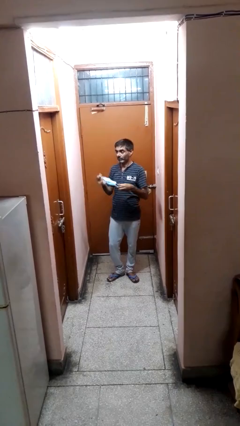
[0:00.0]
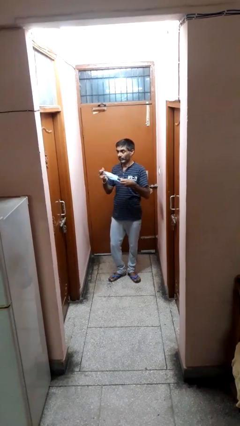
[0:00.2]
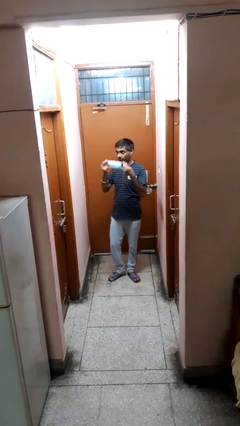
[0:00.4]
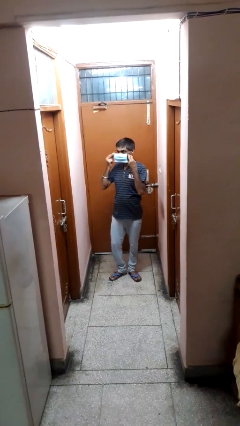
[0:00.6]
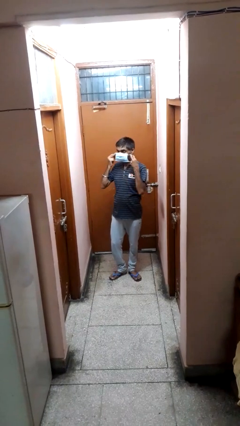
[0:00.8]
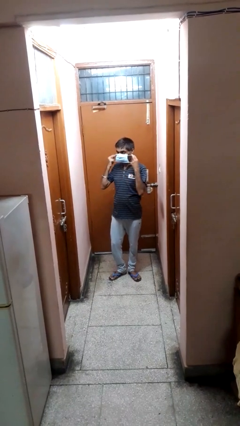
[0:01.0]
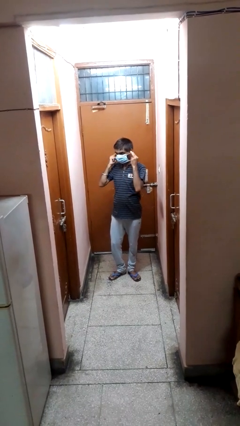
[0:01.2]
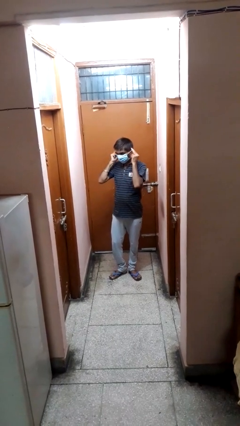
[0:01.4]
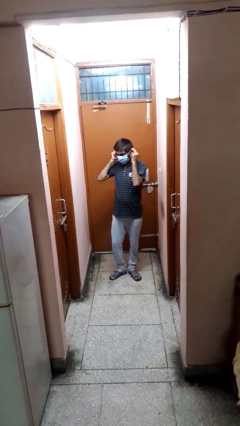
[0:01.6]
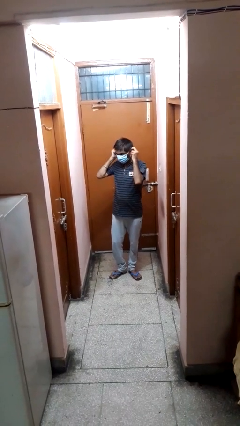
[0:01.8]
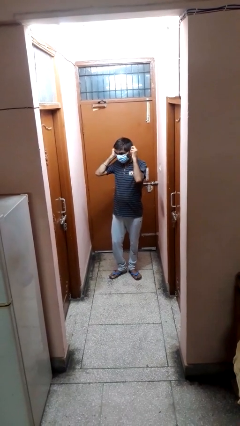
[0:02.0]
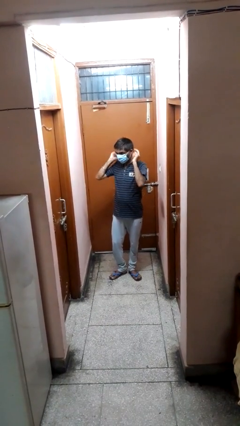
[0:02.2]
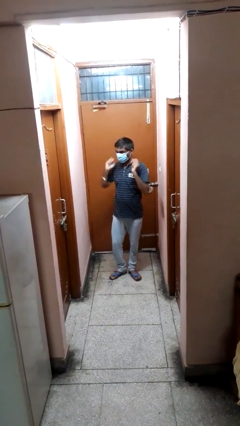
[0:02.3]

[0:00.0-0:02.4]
person puts on facemask

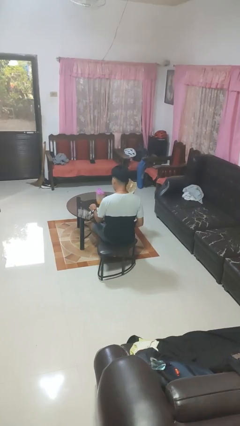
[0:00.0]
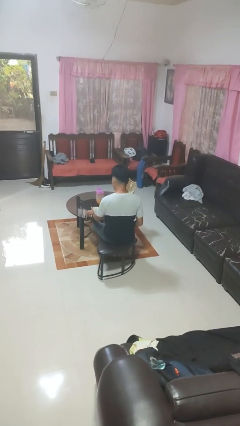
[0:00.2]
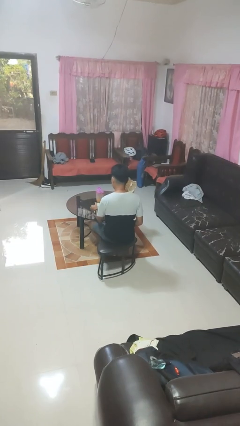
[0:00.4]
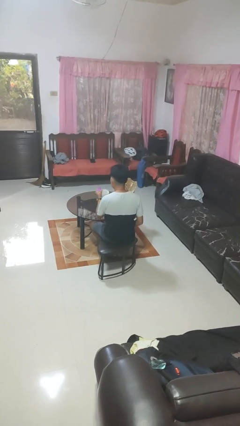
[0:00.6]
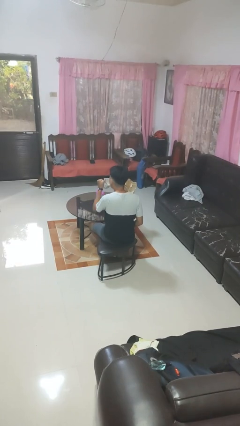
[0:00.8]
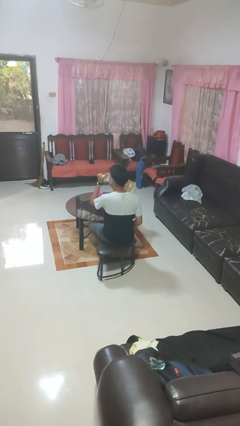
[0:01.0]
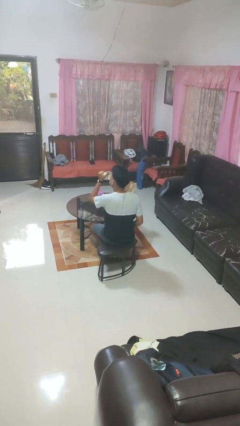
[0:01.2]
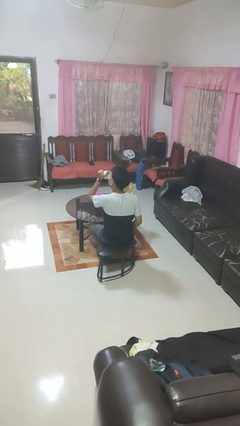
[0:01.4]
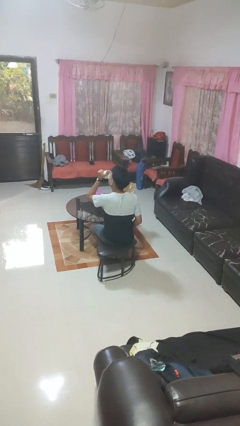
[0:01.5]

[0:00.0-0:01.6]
person drinks from mug

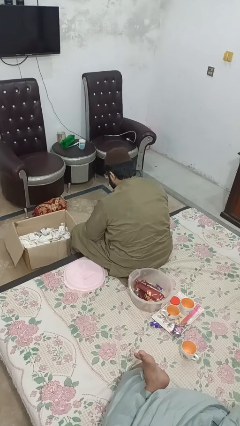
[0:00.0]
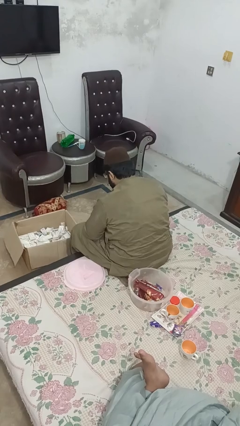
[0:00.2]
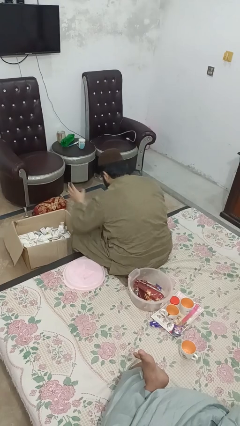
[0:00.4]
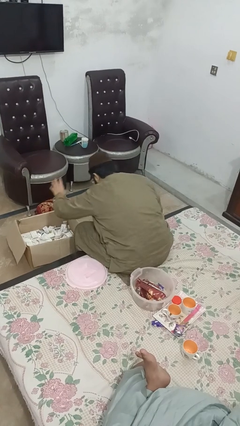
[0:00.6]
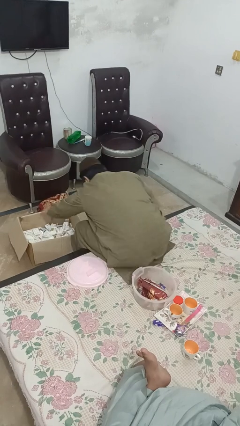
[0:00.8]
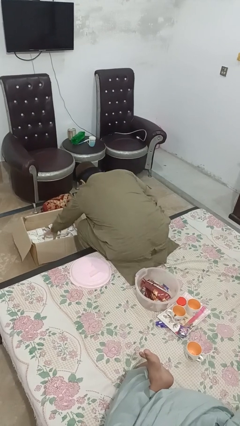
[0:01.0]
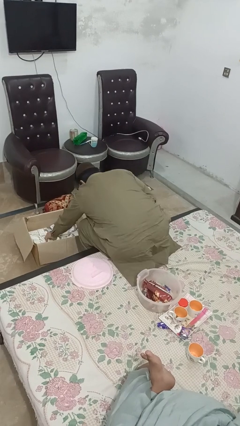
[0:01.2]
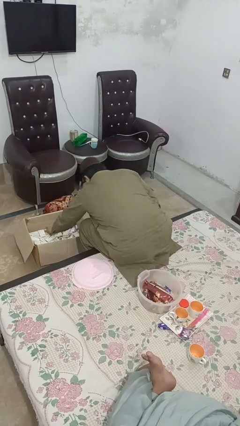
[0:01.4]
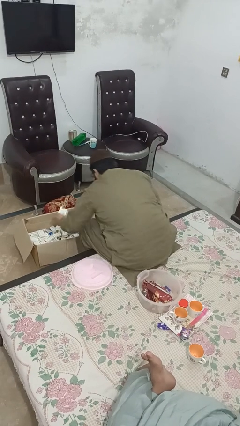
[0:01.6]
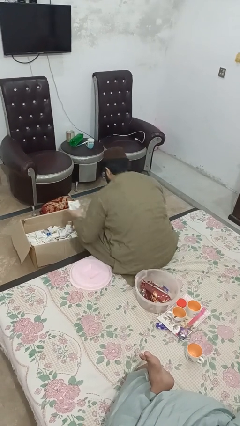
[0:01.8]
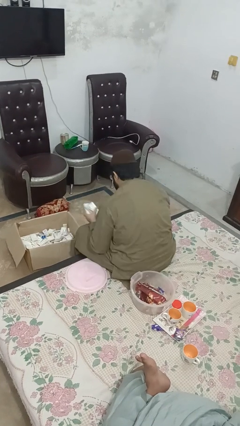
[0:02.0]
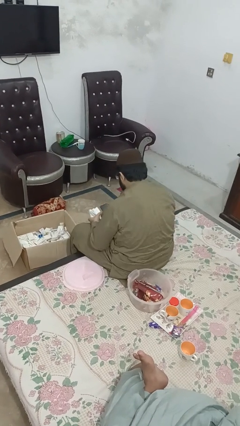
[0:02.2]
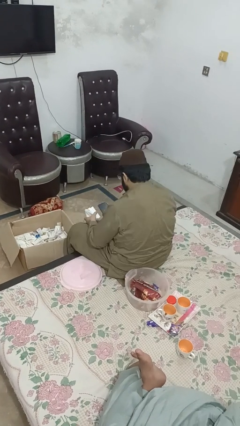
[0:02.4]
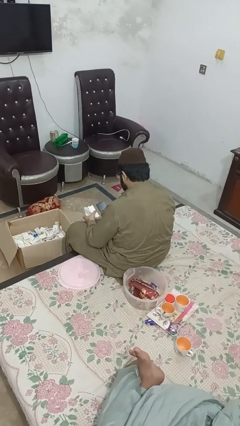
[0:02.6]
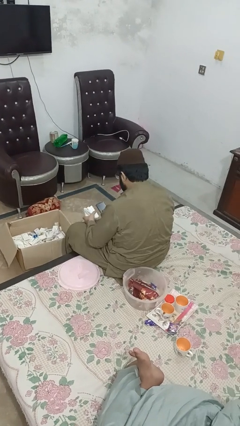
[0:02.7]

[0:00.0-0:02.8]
person takes object from box

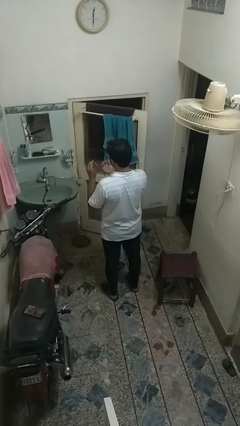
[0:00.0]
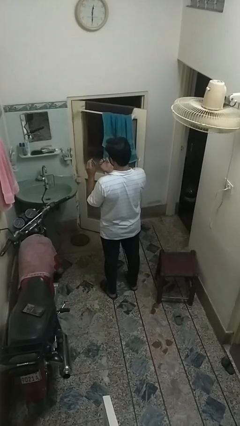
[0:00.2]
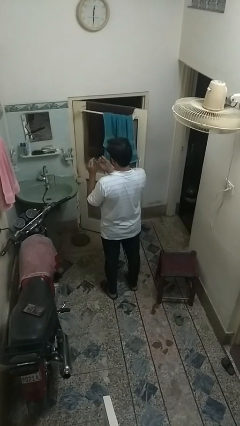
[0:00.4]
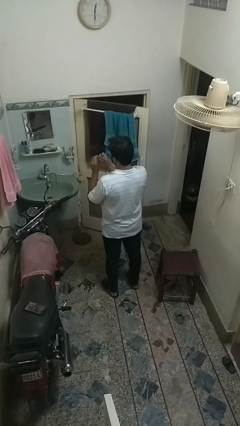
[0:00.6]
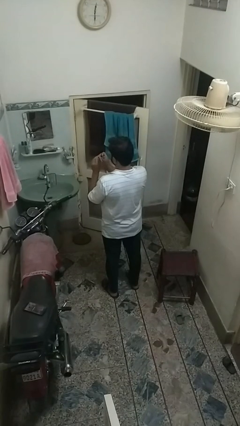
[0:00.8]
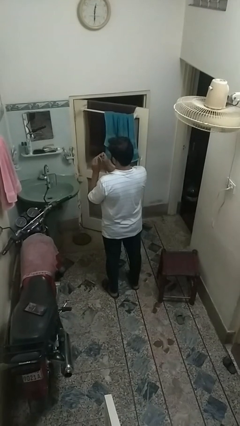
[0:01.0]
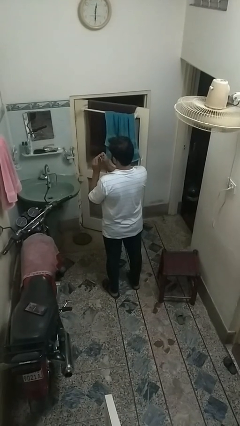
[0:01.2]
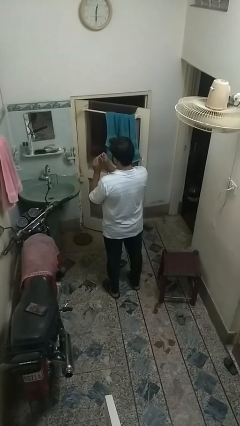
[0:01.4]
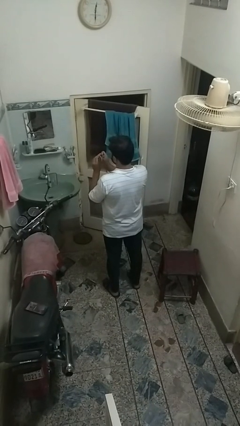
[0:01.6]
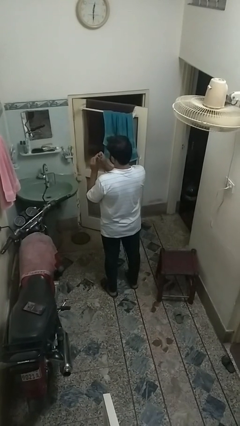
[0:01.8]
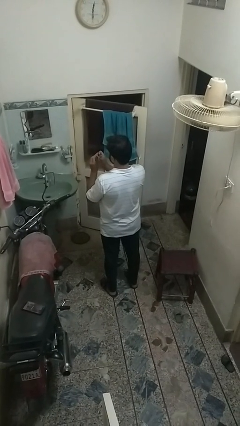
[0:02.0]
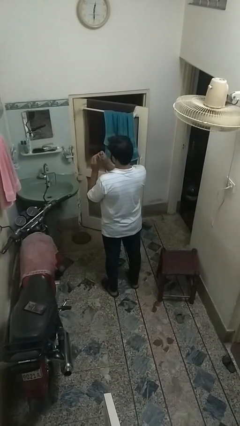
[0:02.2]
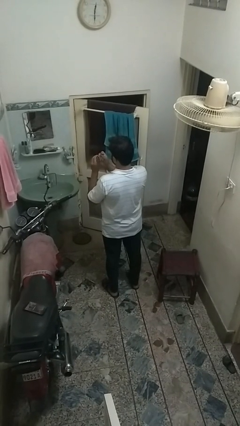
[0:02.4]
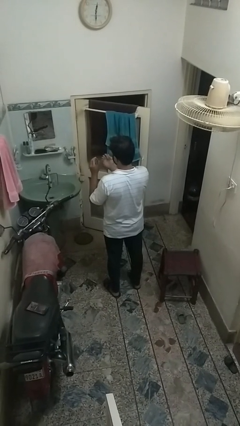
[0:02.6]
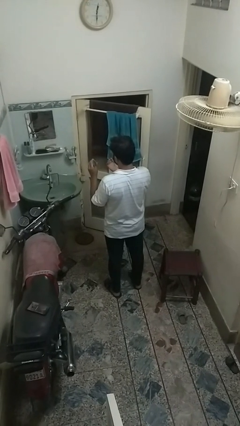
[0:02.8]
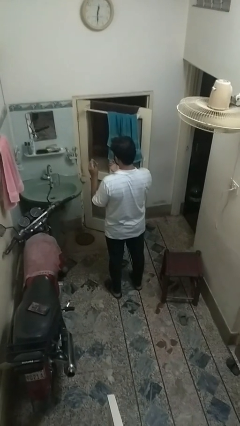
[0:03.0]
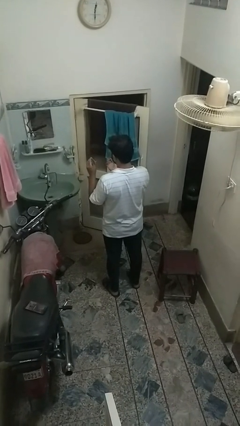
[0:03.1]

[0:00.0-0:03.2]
person clips fingernails

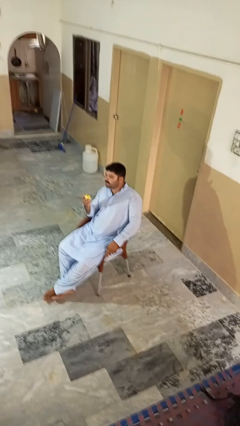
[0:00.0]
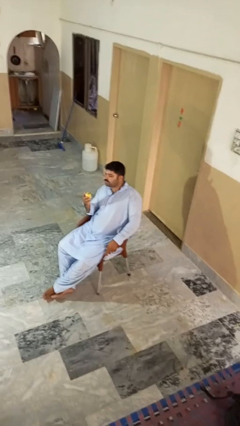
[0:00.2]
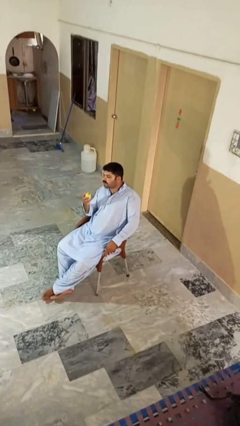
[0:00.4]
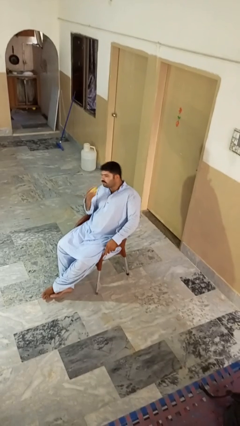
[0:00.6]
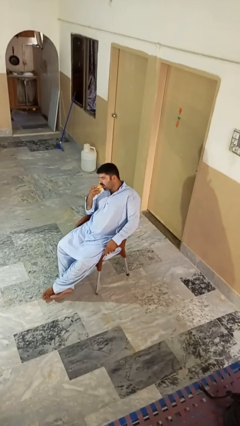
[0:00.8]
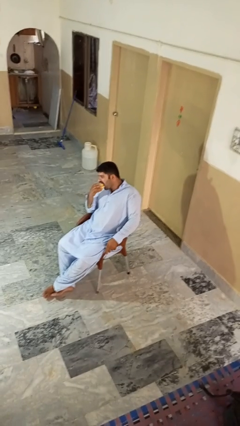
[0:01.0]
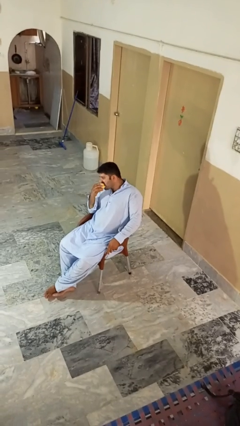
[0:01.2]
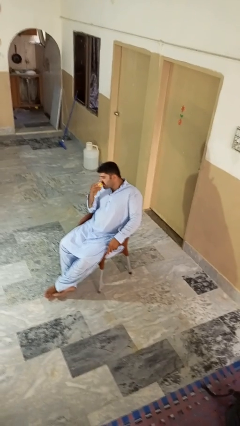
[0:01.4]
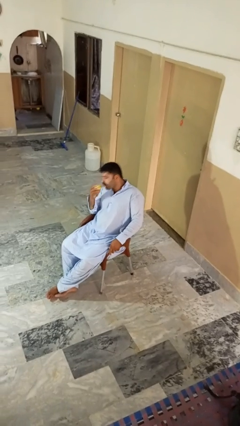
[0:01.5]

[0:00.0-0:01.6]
person eats apple

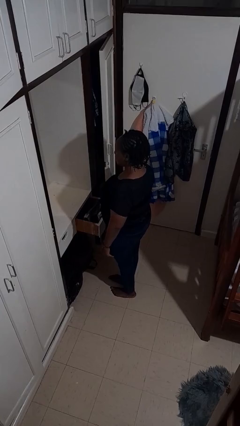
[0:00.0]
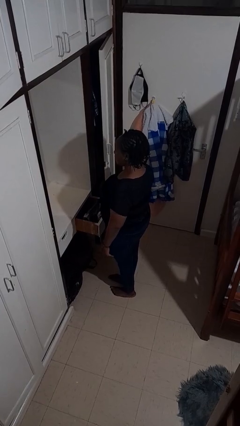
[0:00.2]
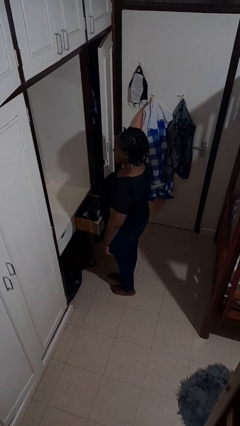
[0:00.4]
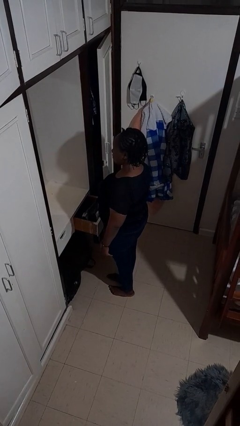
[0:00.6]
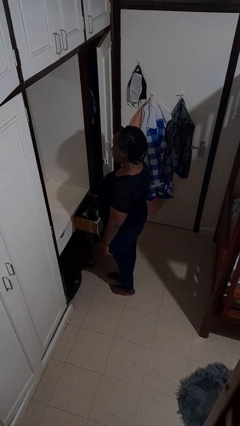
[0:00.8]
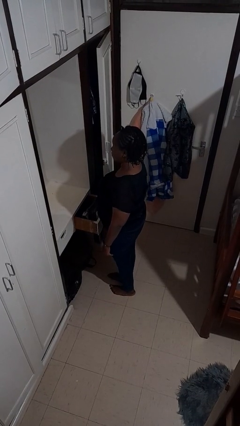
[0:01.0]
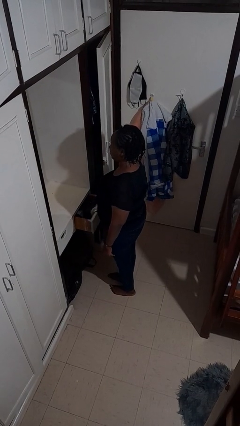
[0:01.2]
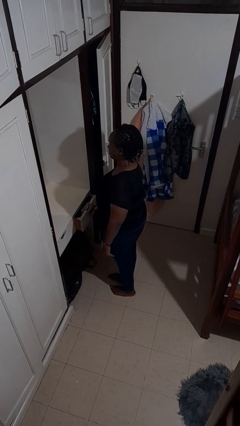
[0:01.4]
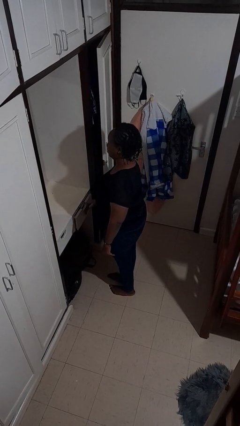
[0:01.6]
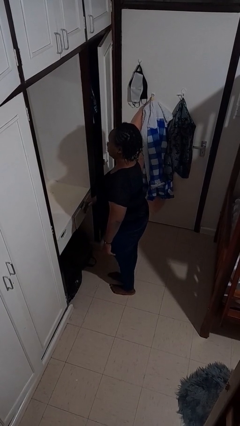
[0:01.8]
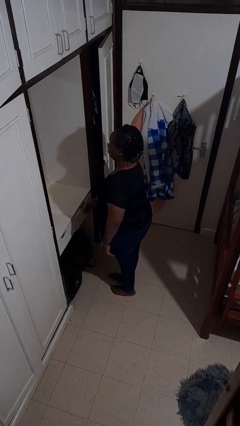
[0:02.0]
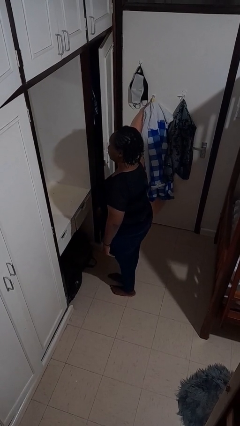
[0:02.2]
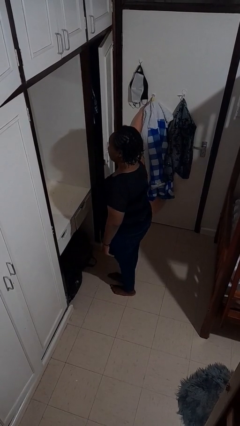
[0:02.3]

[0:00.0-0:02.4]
person closes dresser drawer

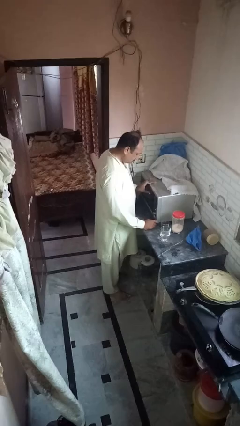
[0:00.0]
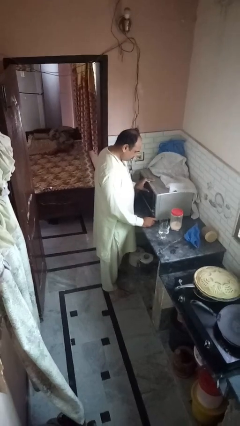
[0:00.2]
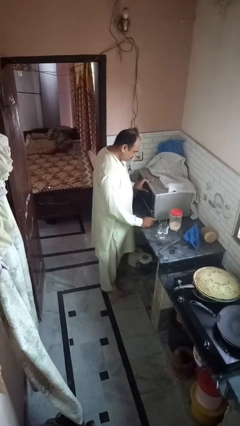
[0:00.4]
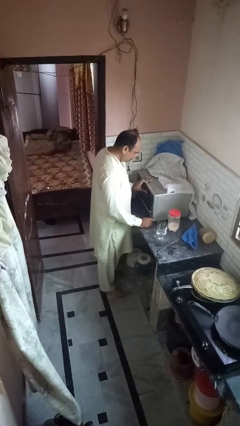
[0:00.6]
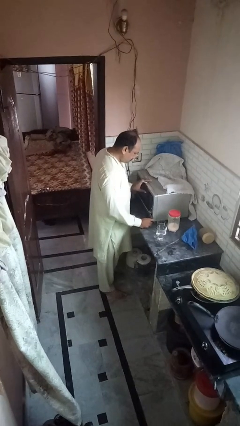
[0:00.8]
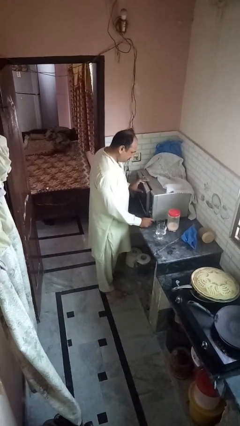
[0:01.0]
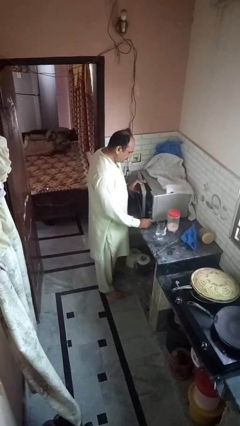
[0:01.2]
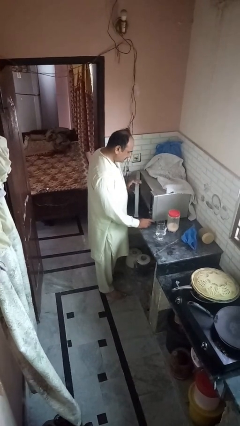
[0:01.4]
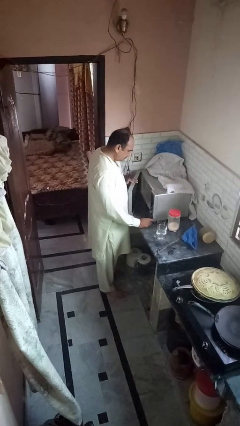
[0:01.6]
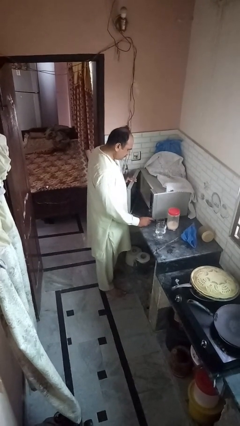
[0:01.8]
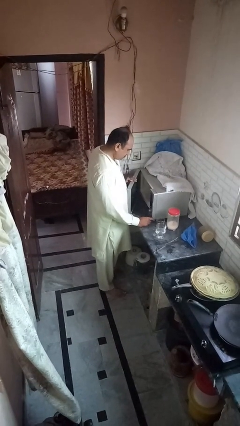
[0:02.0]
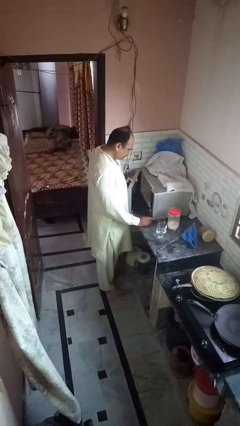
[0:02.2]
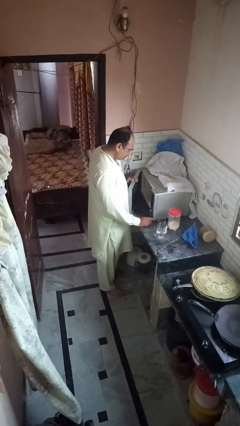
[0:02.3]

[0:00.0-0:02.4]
person opens microwave

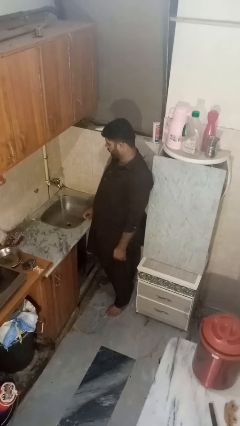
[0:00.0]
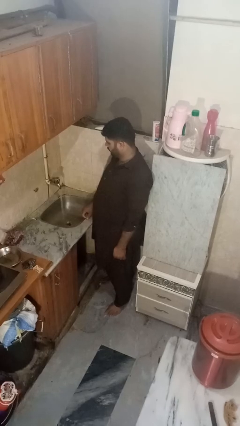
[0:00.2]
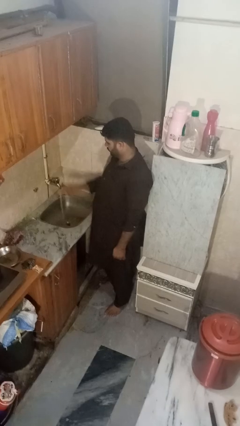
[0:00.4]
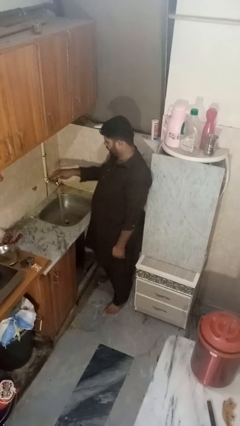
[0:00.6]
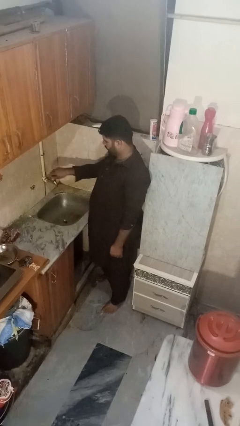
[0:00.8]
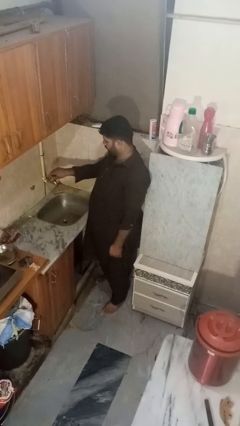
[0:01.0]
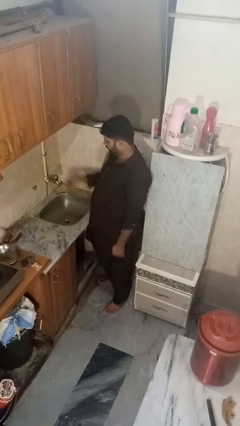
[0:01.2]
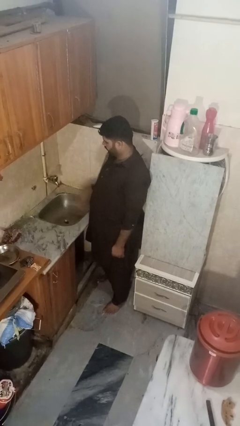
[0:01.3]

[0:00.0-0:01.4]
person turns off faucet
